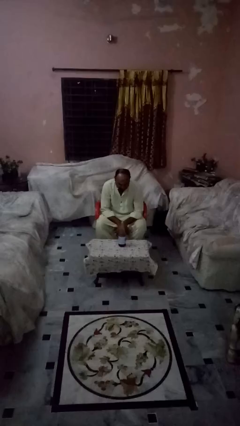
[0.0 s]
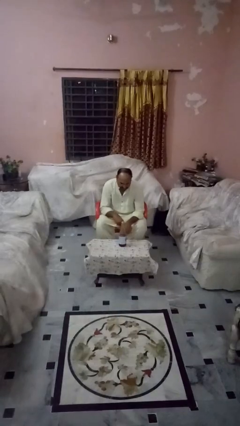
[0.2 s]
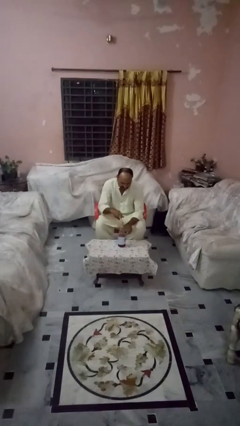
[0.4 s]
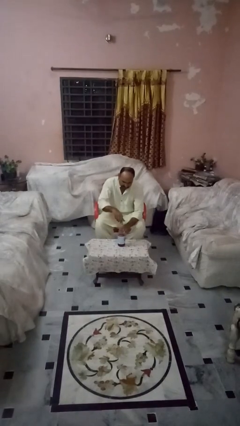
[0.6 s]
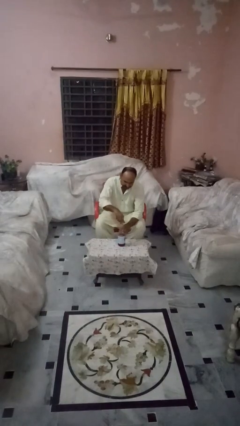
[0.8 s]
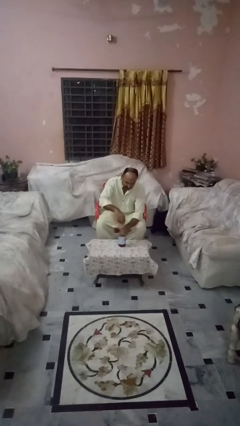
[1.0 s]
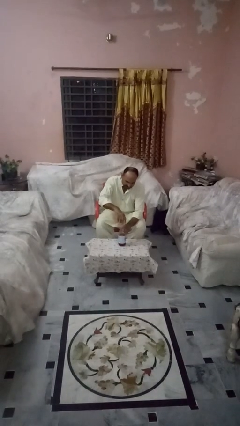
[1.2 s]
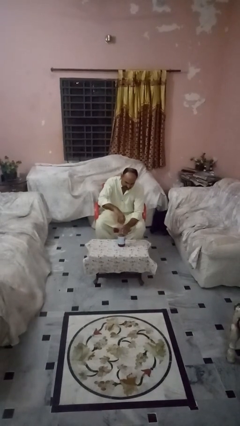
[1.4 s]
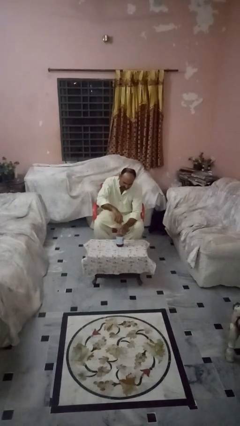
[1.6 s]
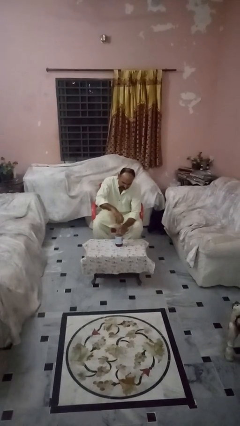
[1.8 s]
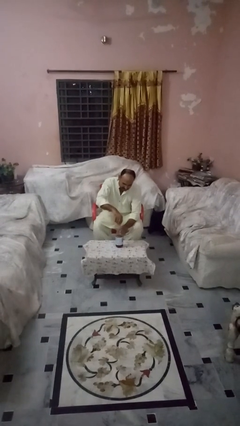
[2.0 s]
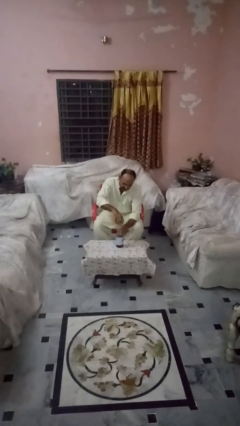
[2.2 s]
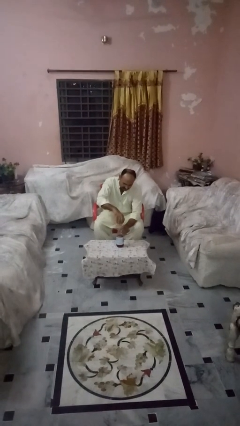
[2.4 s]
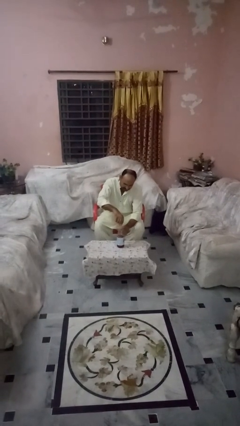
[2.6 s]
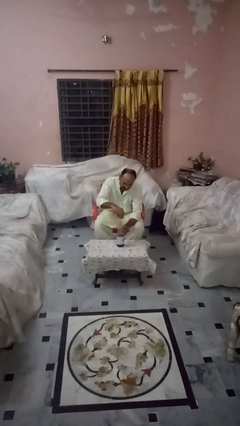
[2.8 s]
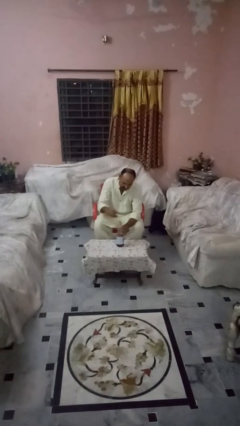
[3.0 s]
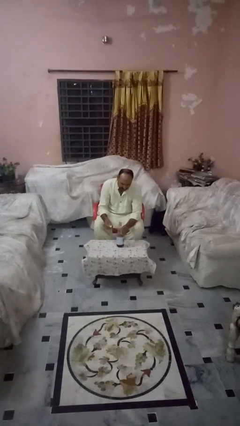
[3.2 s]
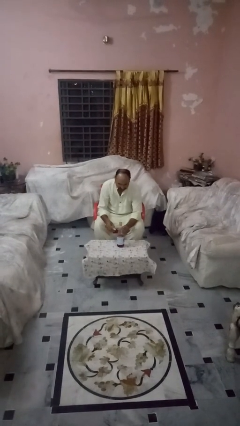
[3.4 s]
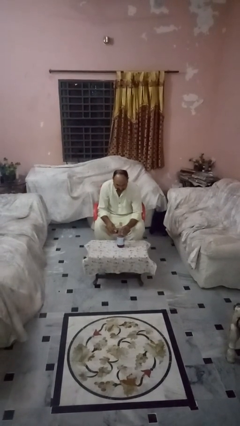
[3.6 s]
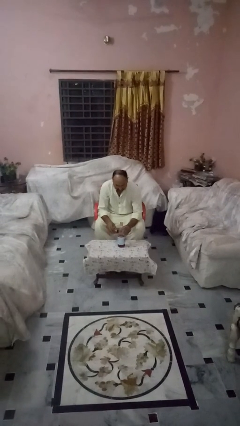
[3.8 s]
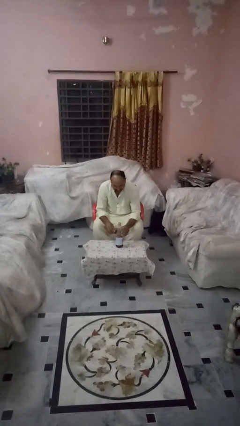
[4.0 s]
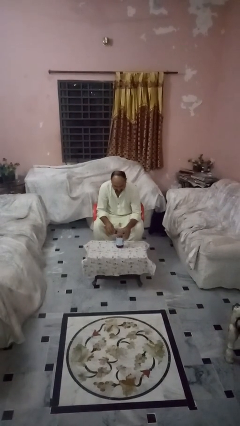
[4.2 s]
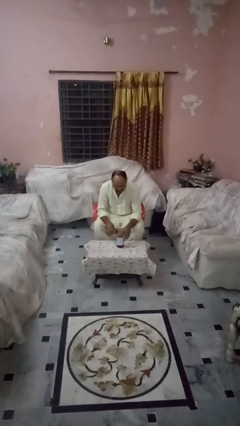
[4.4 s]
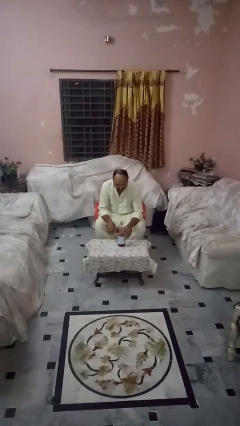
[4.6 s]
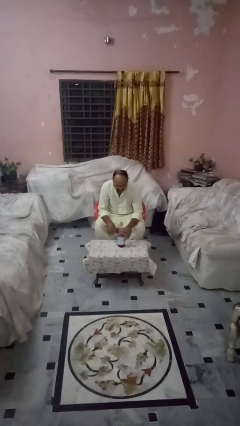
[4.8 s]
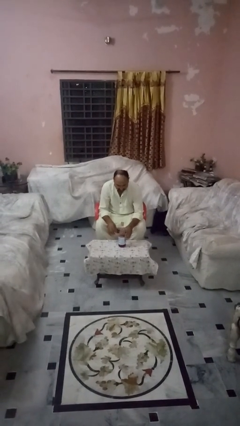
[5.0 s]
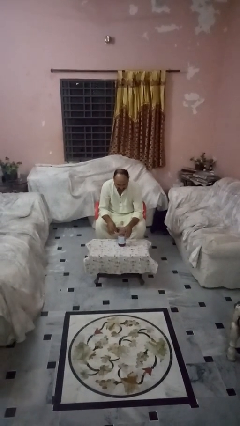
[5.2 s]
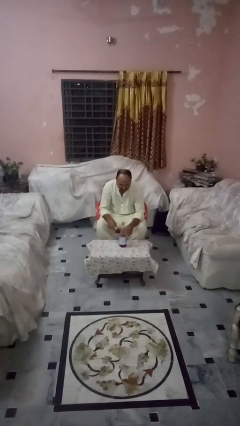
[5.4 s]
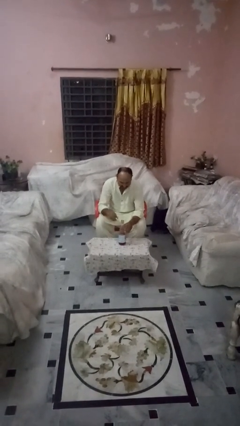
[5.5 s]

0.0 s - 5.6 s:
person unscrews lid from bottle

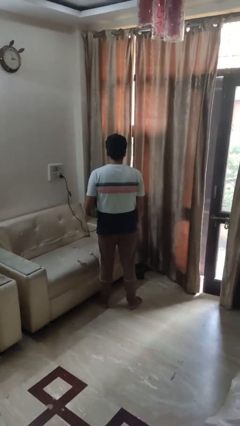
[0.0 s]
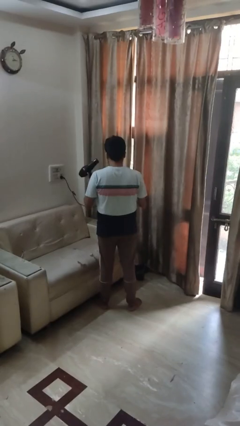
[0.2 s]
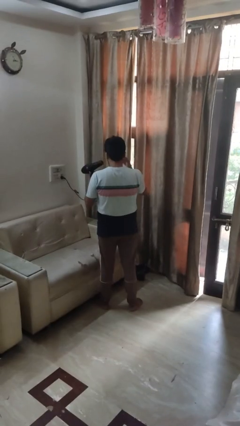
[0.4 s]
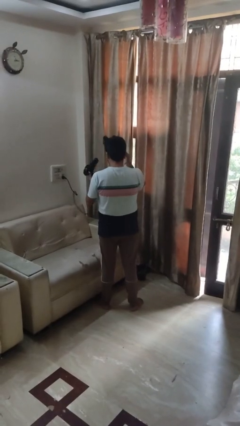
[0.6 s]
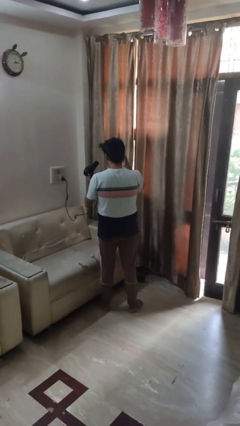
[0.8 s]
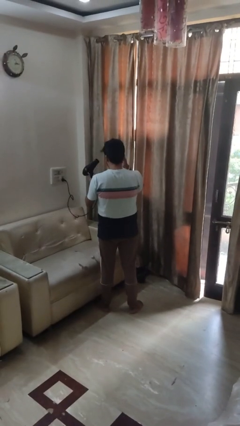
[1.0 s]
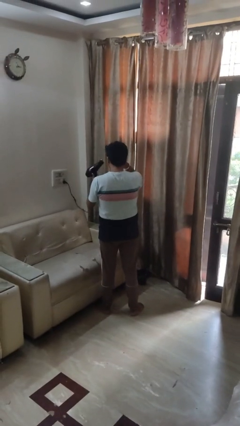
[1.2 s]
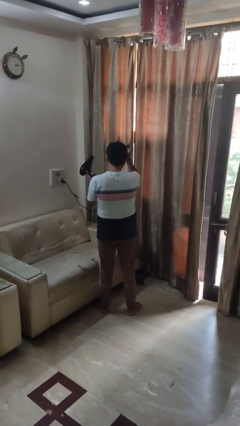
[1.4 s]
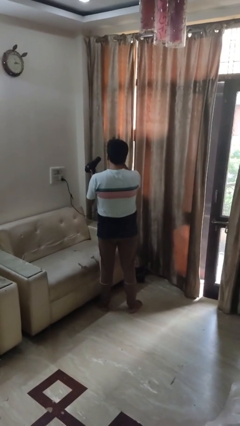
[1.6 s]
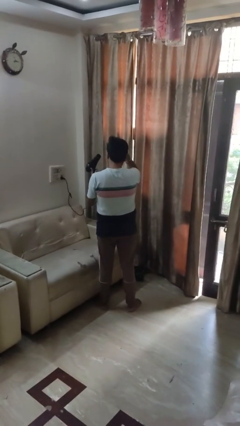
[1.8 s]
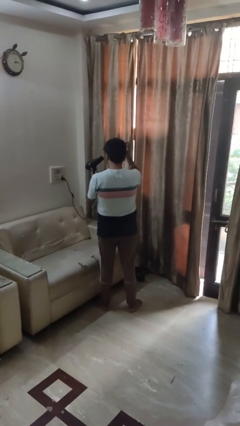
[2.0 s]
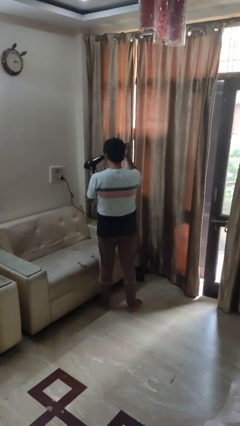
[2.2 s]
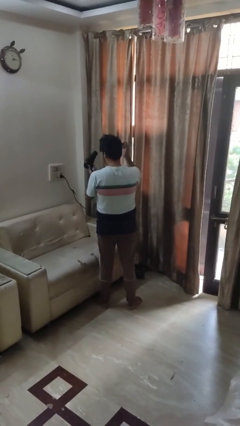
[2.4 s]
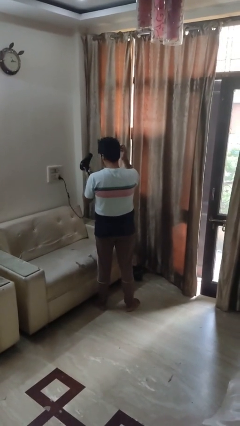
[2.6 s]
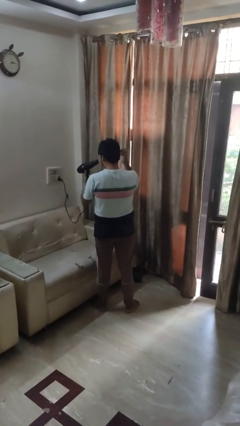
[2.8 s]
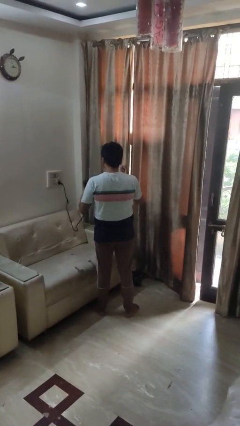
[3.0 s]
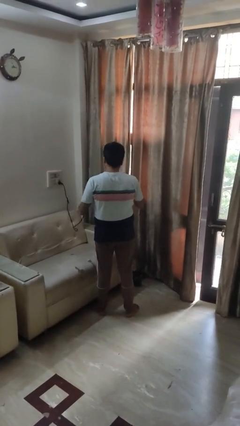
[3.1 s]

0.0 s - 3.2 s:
person dries hair with hairdryer

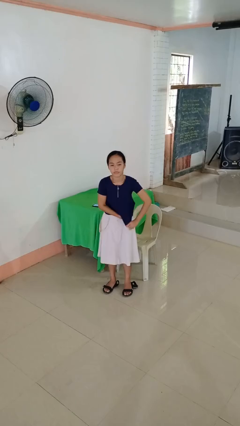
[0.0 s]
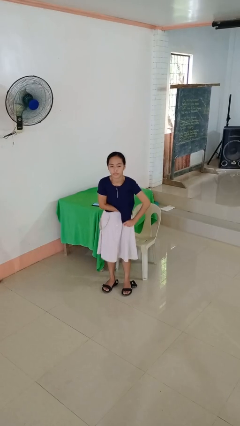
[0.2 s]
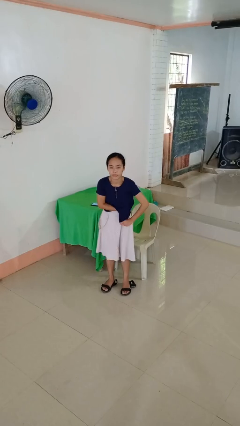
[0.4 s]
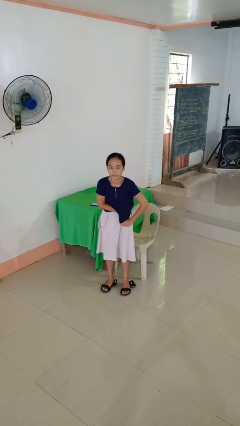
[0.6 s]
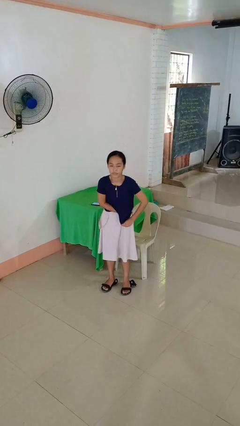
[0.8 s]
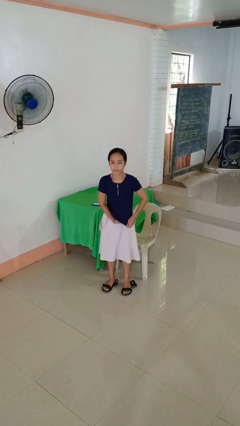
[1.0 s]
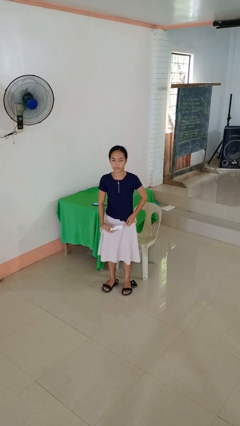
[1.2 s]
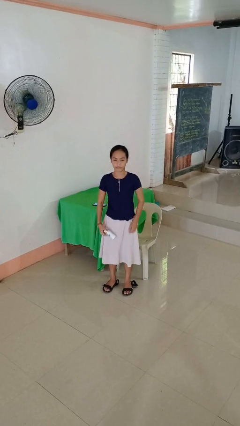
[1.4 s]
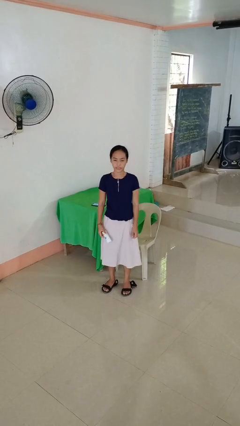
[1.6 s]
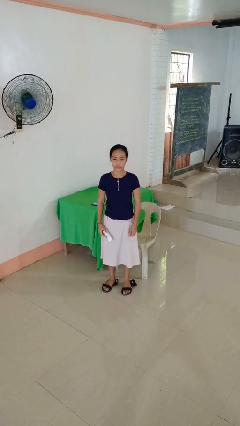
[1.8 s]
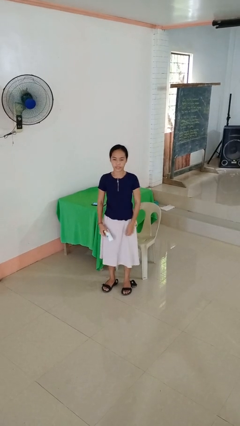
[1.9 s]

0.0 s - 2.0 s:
person applies deodorant

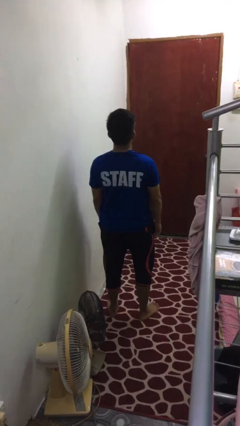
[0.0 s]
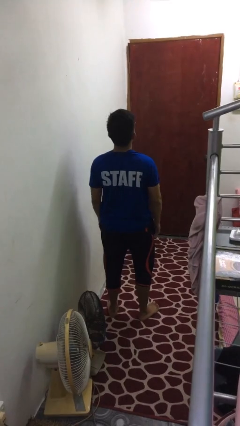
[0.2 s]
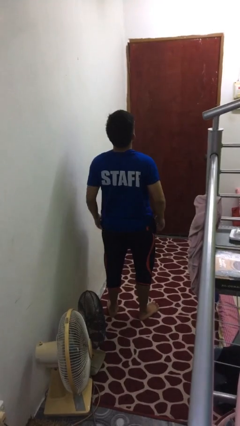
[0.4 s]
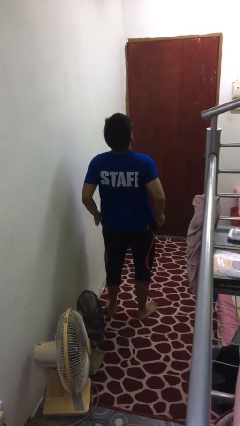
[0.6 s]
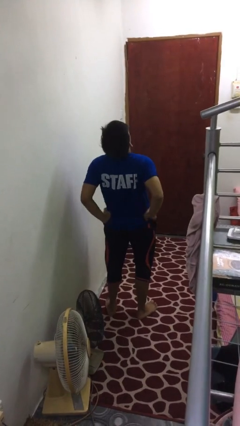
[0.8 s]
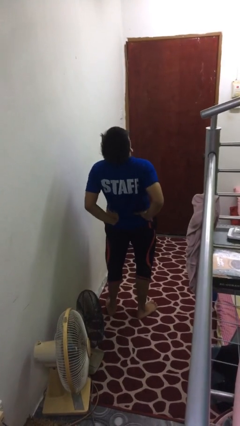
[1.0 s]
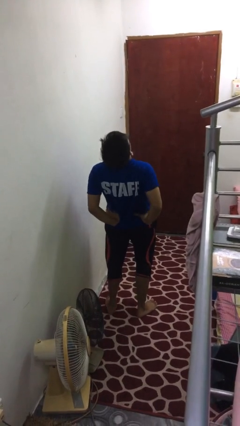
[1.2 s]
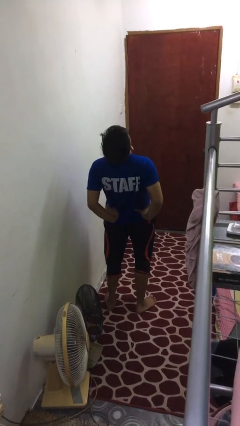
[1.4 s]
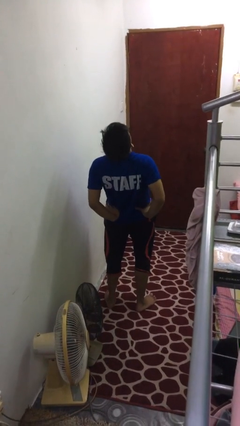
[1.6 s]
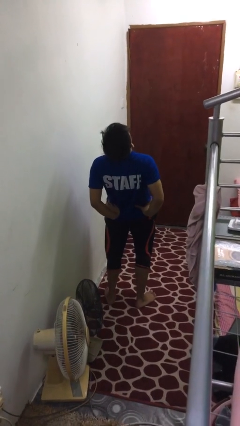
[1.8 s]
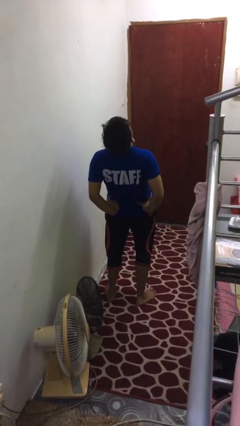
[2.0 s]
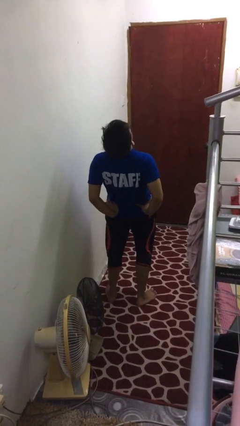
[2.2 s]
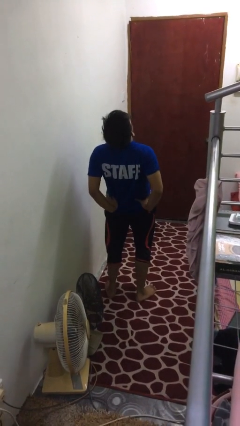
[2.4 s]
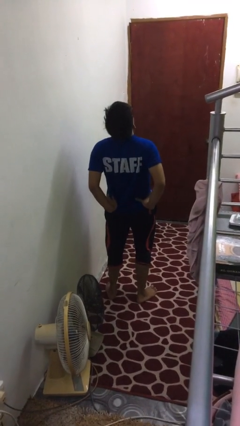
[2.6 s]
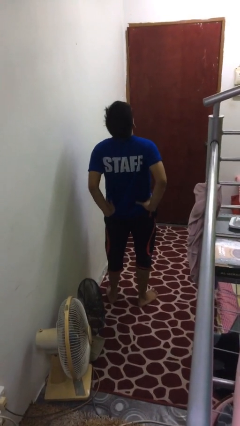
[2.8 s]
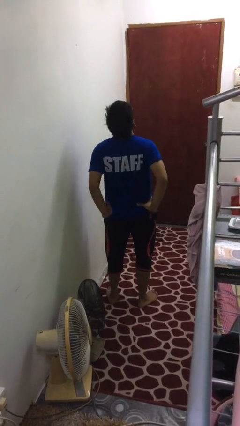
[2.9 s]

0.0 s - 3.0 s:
person stretches back

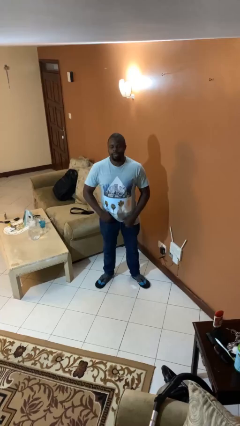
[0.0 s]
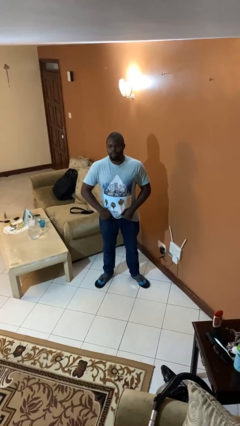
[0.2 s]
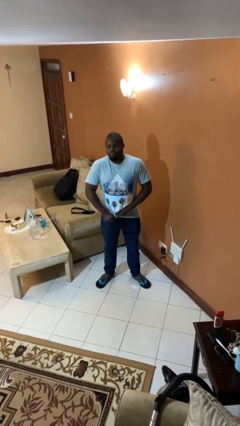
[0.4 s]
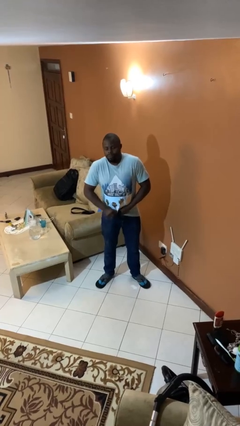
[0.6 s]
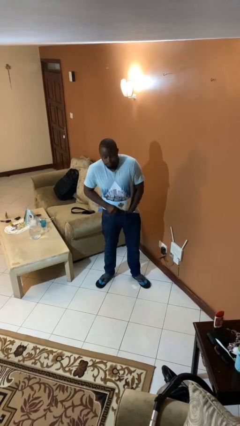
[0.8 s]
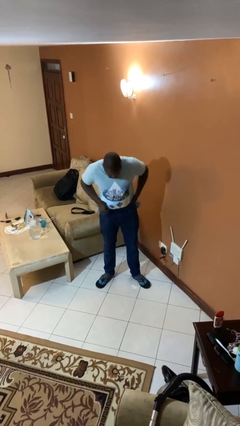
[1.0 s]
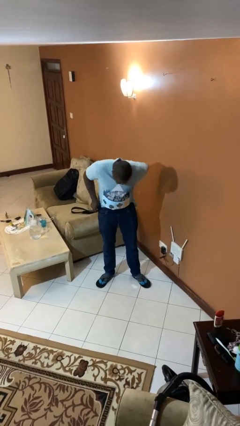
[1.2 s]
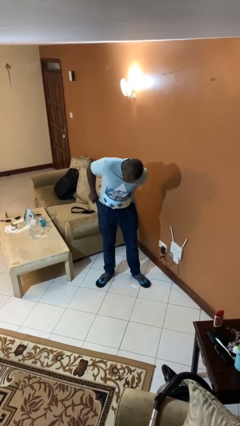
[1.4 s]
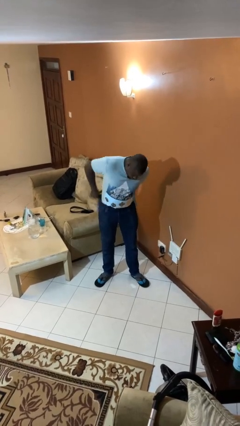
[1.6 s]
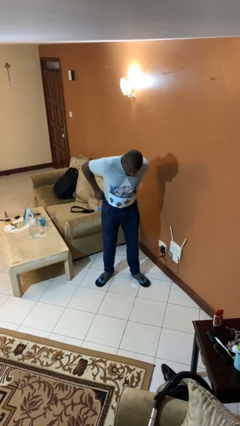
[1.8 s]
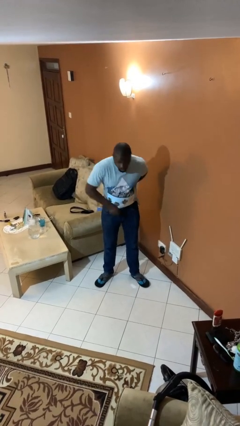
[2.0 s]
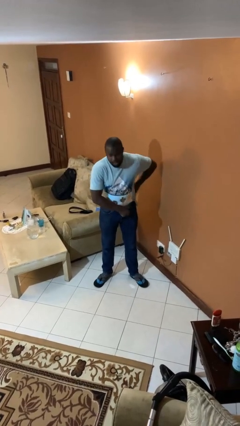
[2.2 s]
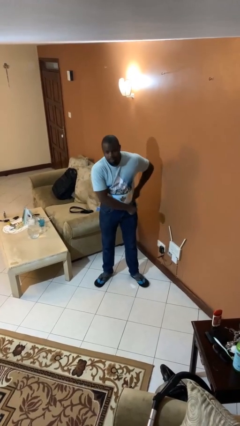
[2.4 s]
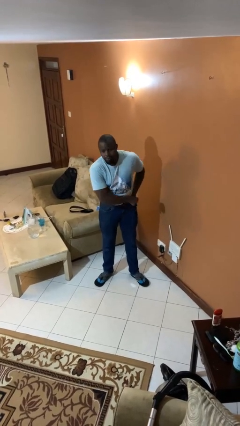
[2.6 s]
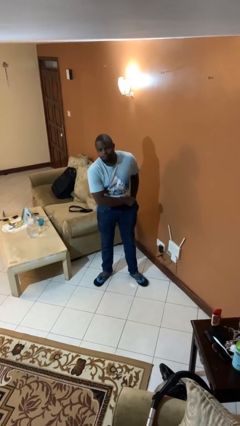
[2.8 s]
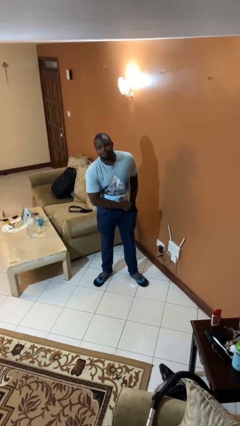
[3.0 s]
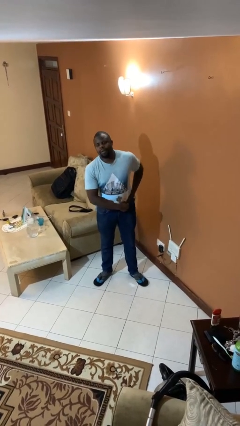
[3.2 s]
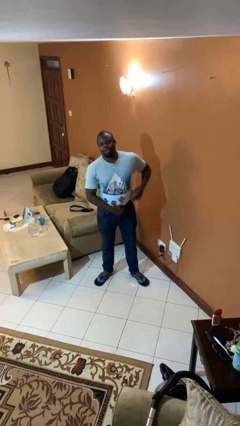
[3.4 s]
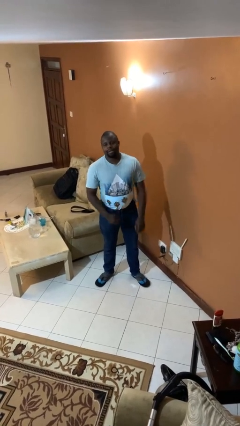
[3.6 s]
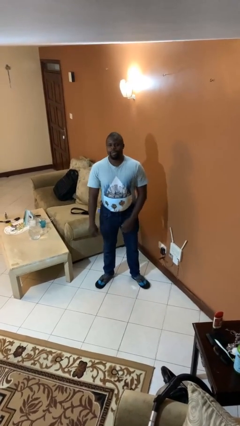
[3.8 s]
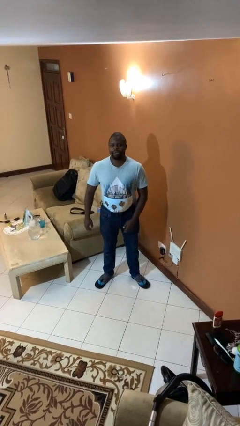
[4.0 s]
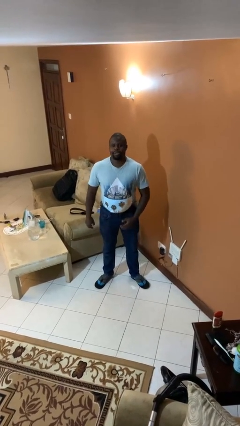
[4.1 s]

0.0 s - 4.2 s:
person tucks in shirt
